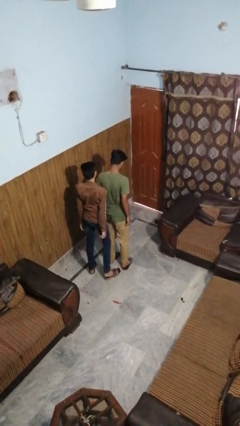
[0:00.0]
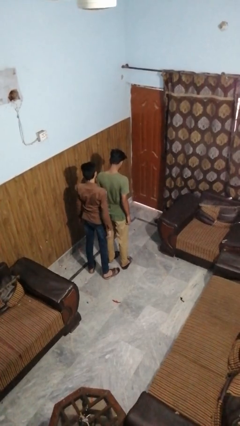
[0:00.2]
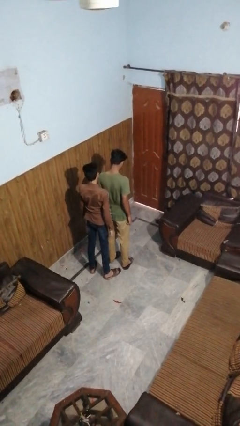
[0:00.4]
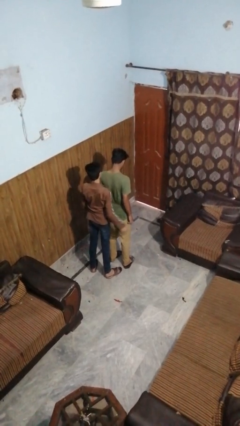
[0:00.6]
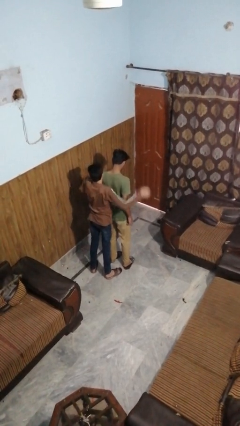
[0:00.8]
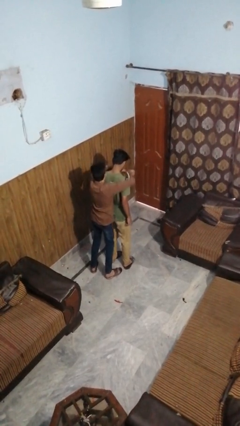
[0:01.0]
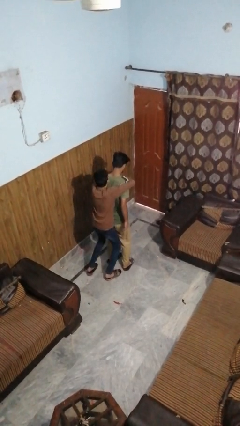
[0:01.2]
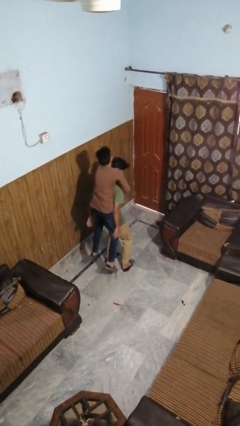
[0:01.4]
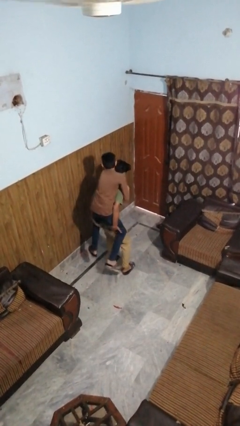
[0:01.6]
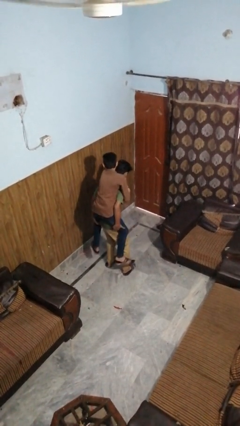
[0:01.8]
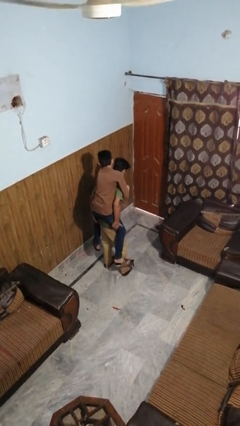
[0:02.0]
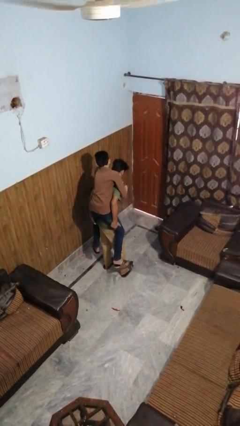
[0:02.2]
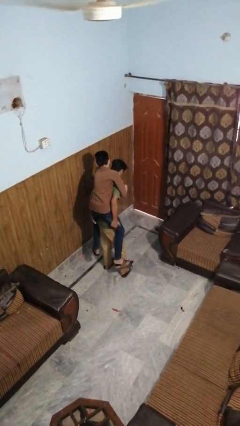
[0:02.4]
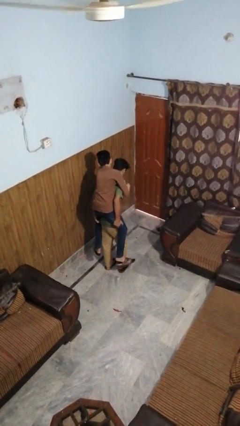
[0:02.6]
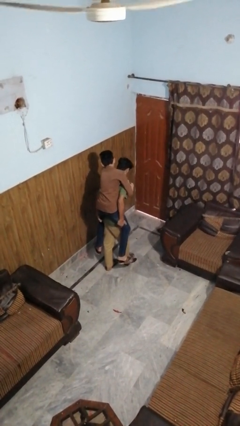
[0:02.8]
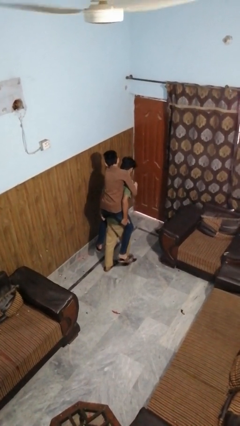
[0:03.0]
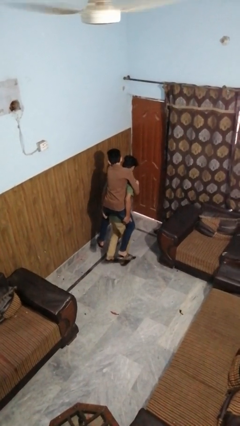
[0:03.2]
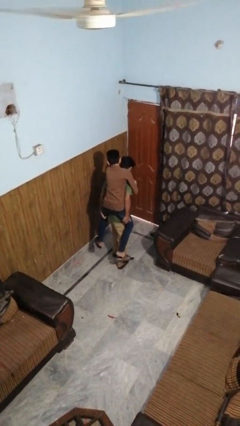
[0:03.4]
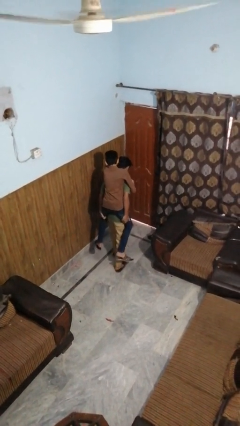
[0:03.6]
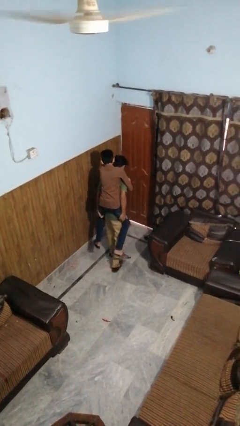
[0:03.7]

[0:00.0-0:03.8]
person carries person on back

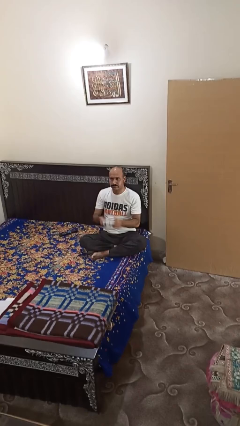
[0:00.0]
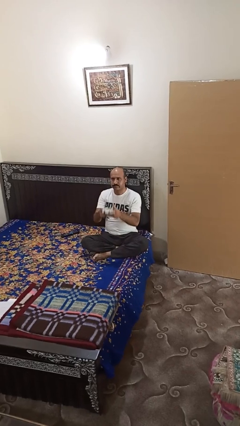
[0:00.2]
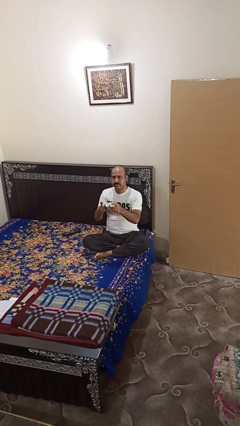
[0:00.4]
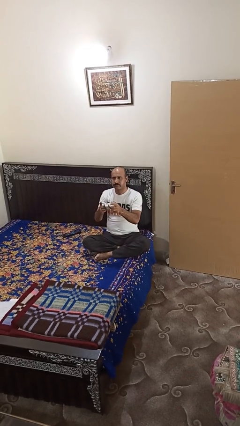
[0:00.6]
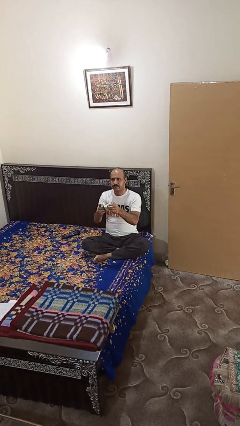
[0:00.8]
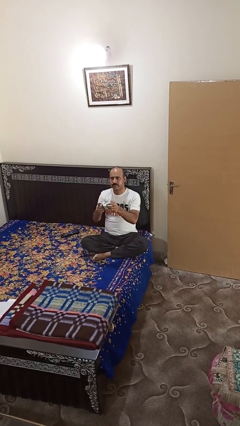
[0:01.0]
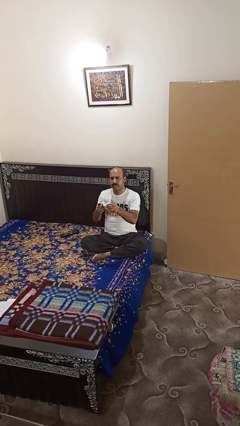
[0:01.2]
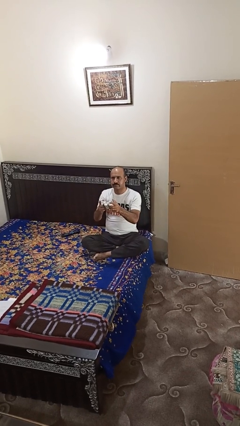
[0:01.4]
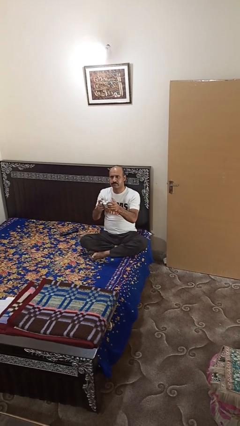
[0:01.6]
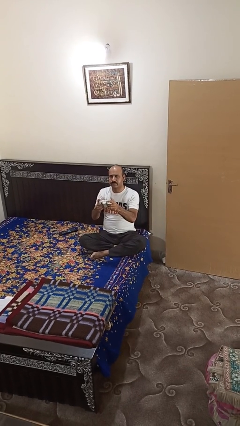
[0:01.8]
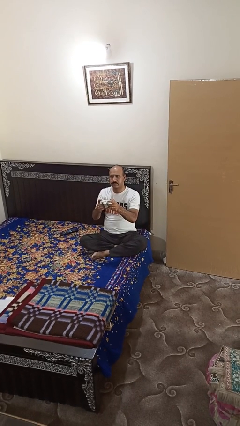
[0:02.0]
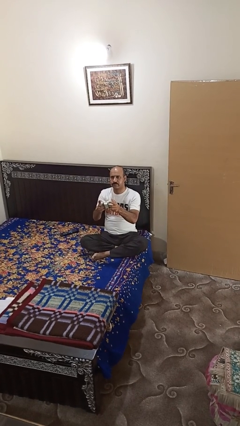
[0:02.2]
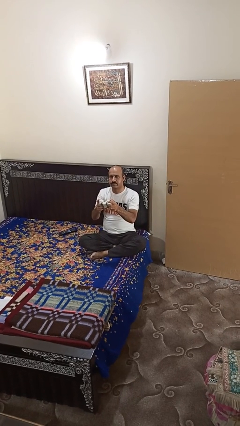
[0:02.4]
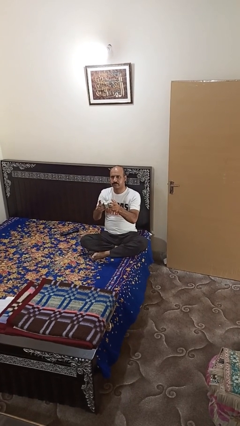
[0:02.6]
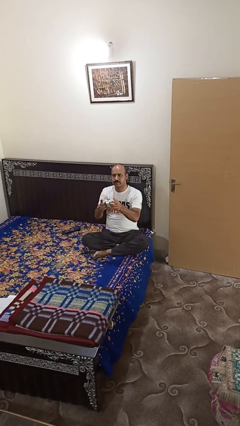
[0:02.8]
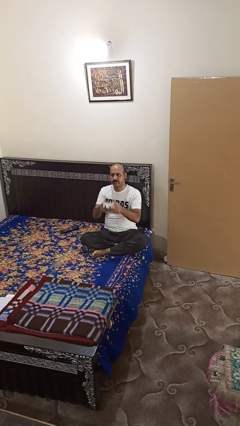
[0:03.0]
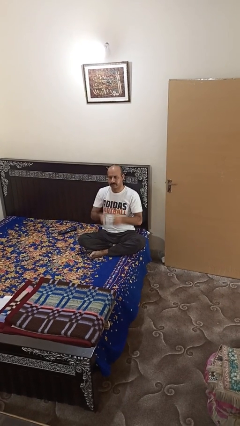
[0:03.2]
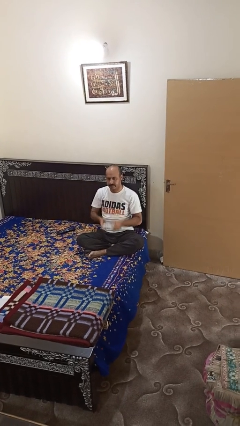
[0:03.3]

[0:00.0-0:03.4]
person interacts with handheld game

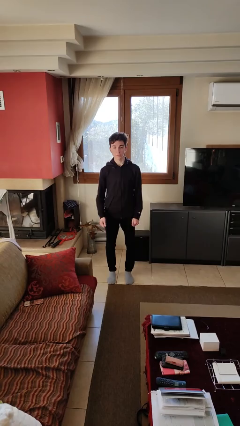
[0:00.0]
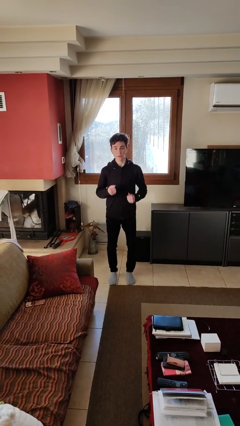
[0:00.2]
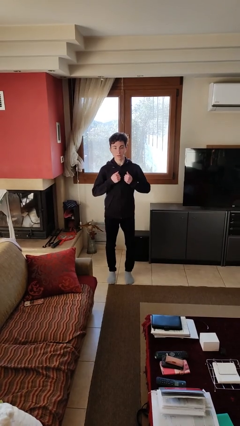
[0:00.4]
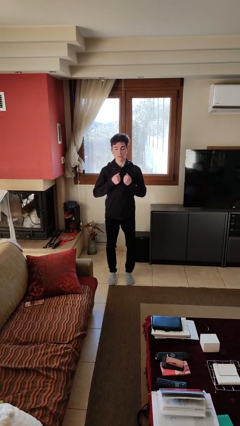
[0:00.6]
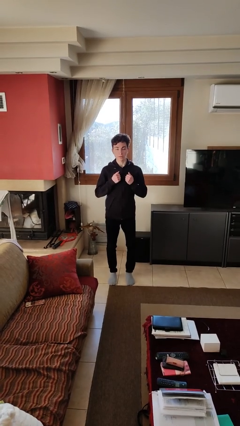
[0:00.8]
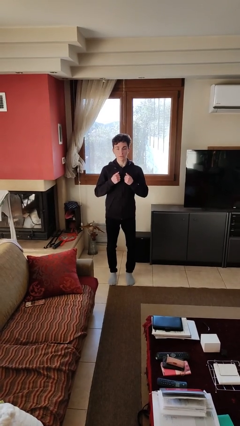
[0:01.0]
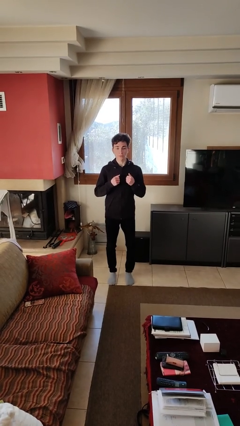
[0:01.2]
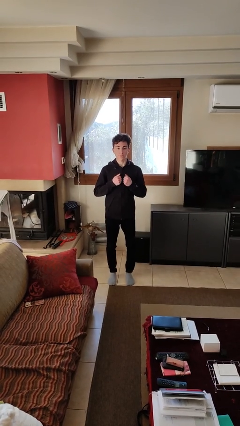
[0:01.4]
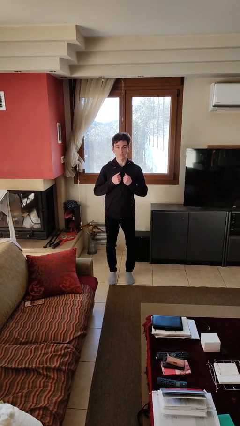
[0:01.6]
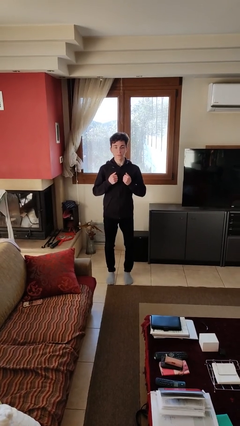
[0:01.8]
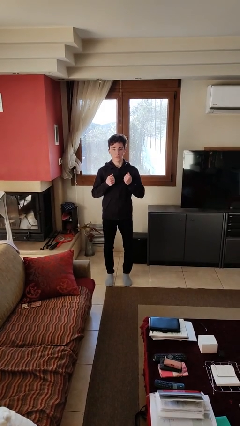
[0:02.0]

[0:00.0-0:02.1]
person drums on chest

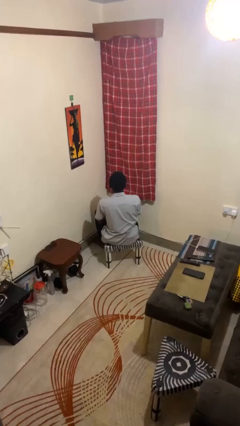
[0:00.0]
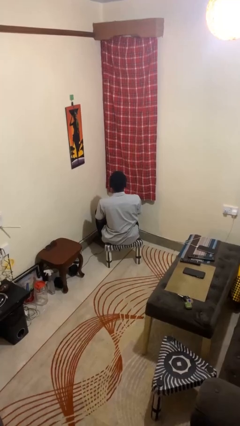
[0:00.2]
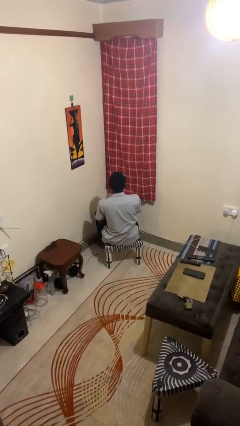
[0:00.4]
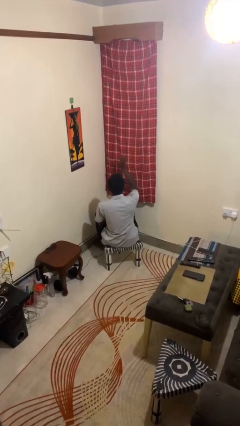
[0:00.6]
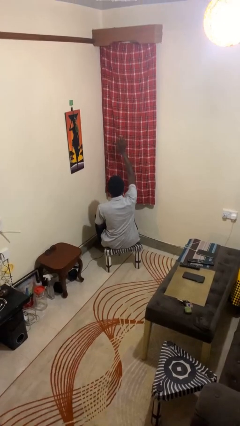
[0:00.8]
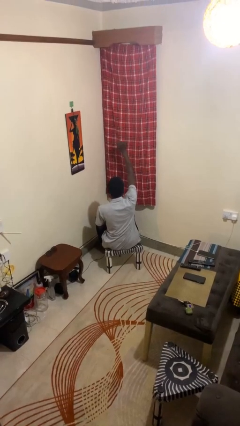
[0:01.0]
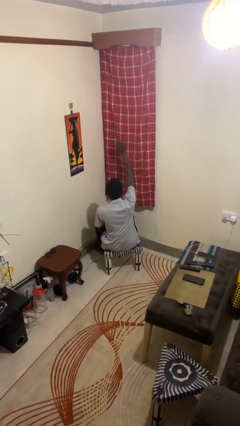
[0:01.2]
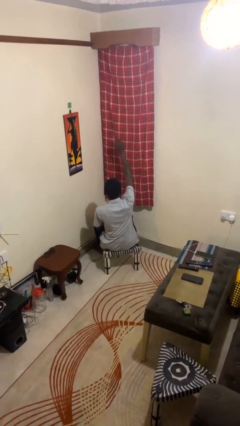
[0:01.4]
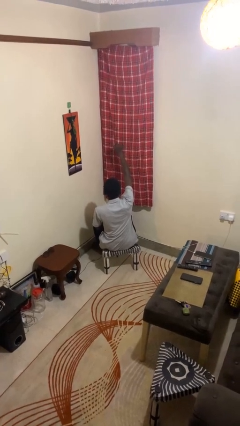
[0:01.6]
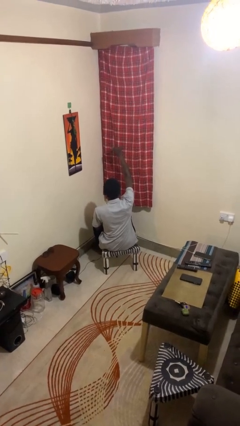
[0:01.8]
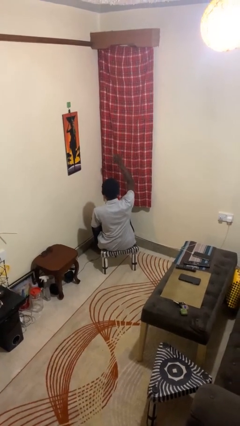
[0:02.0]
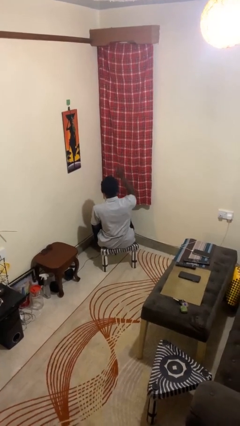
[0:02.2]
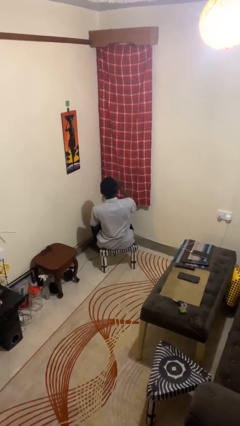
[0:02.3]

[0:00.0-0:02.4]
person gestures come here

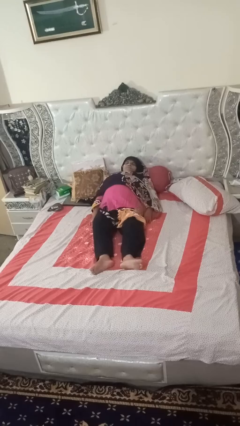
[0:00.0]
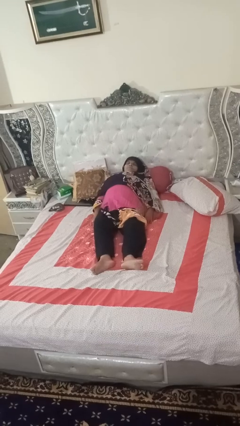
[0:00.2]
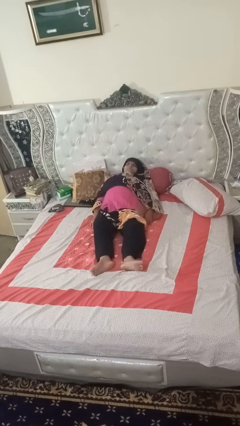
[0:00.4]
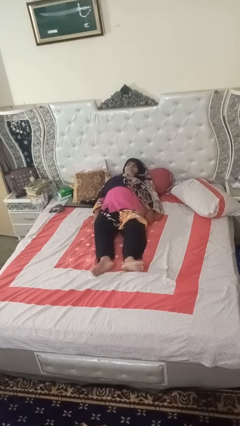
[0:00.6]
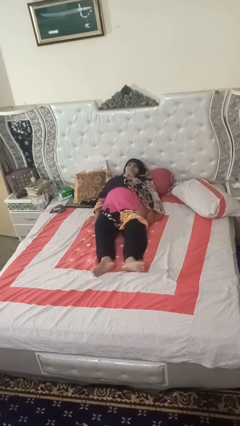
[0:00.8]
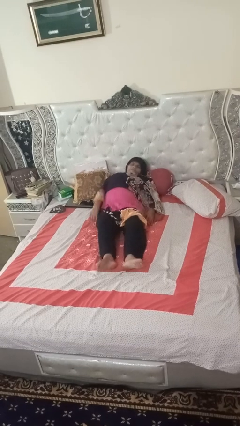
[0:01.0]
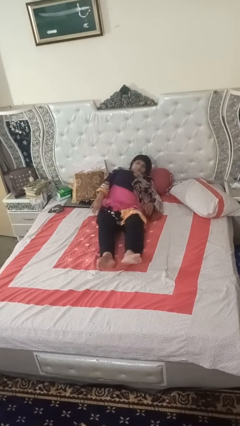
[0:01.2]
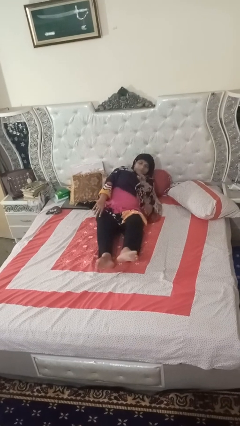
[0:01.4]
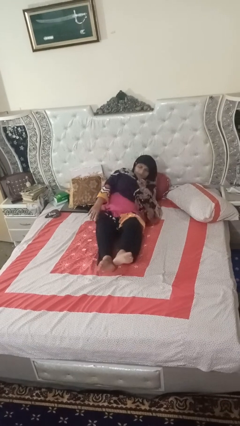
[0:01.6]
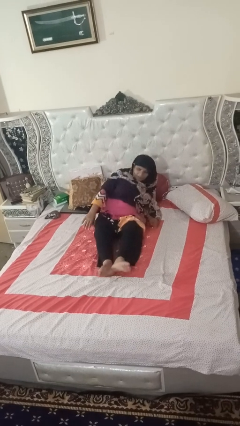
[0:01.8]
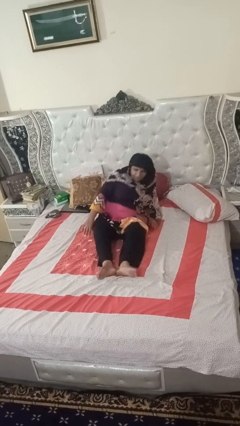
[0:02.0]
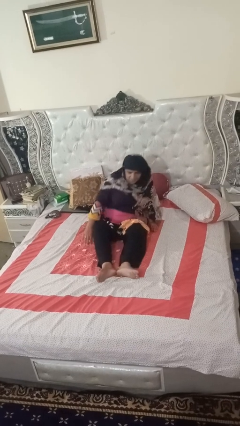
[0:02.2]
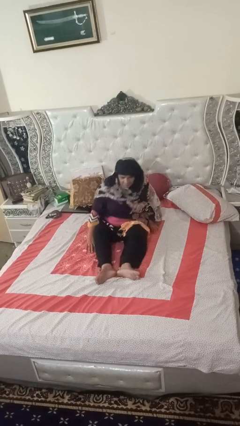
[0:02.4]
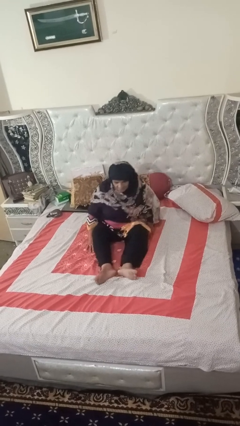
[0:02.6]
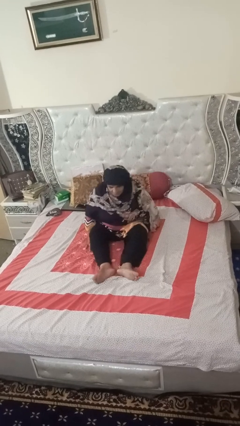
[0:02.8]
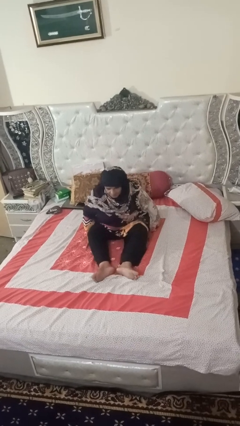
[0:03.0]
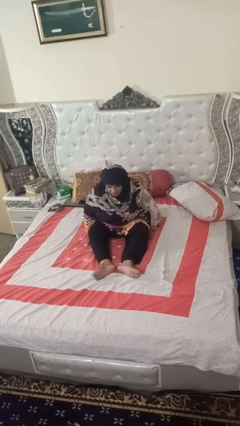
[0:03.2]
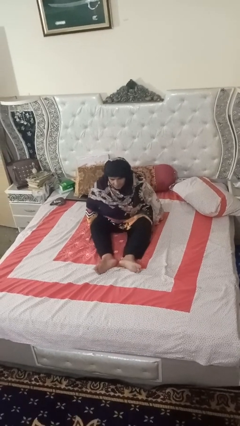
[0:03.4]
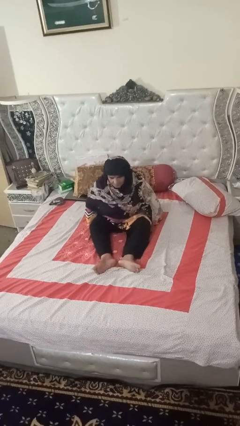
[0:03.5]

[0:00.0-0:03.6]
person stands up

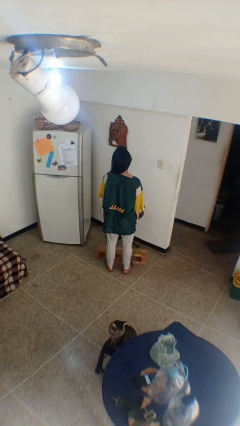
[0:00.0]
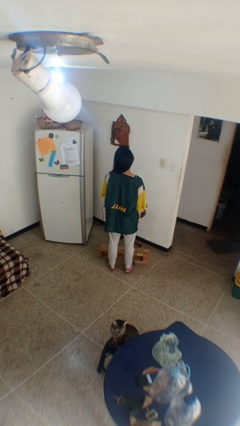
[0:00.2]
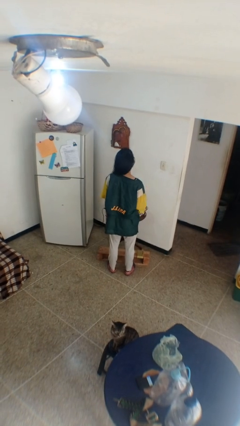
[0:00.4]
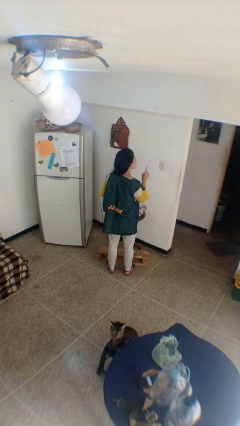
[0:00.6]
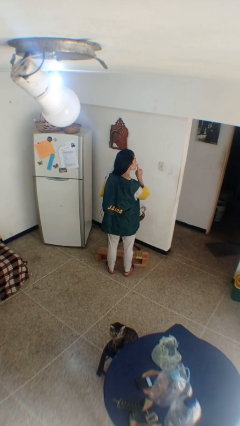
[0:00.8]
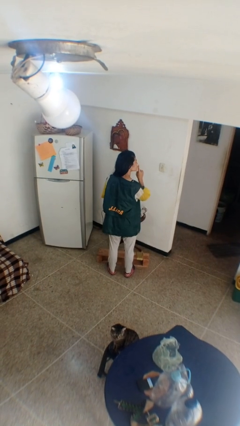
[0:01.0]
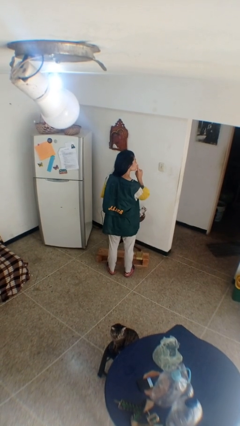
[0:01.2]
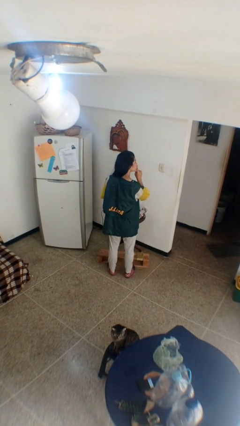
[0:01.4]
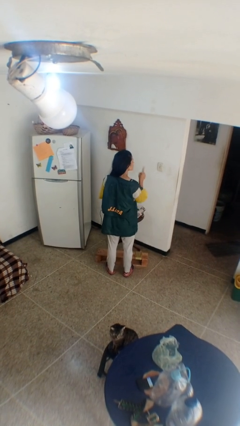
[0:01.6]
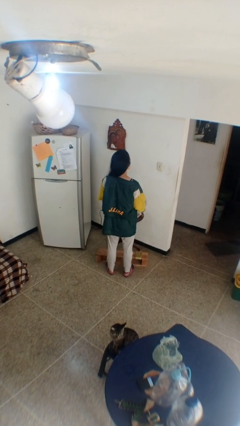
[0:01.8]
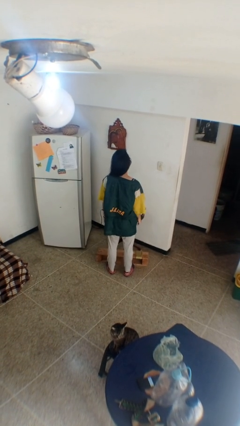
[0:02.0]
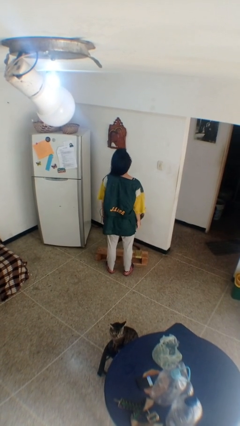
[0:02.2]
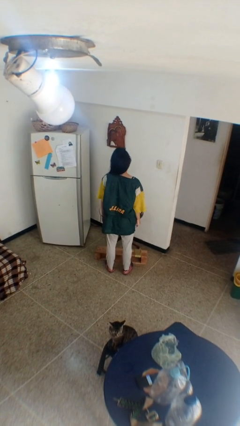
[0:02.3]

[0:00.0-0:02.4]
person gestures be quiet
